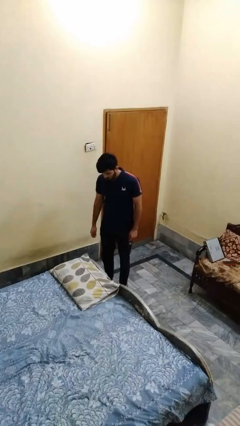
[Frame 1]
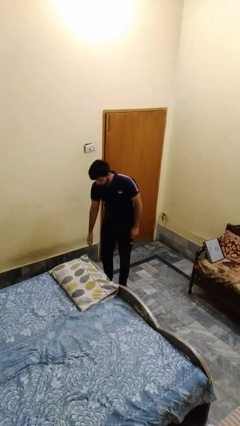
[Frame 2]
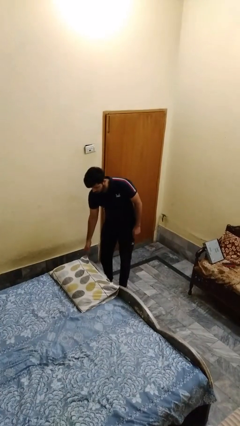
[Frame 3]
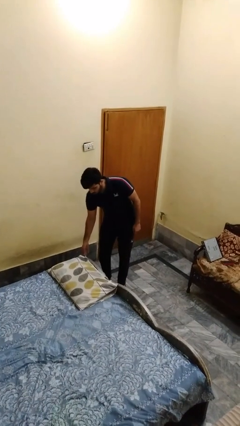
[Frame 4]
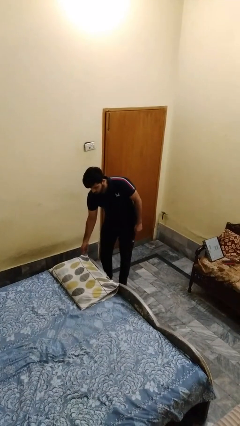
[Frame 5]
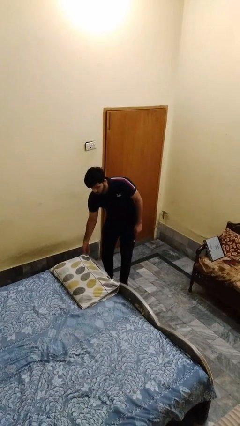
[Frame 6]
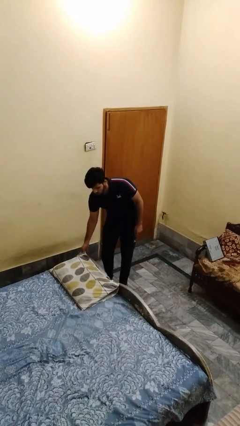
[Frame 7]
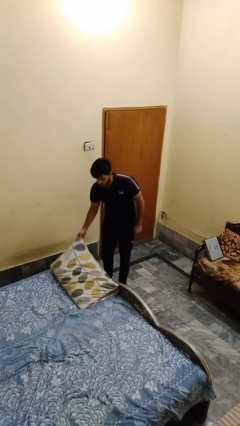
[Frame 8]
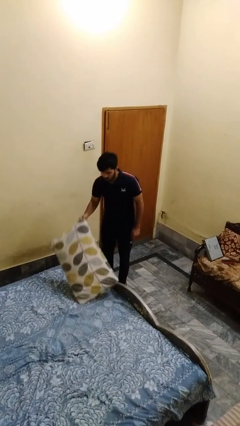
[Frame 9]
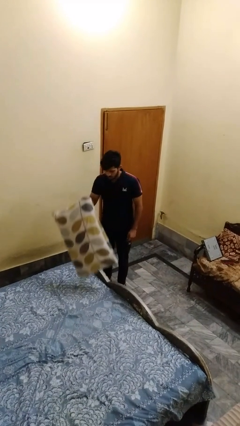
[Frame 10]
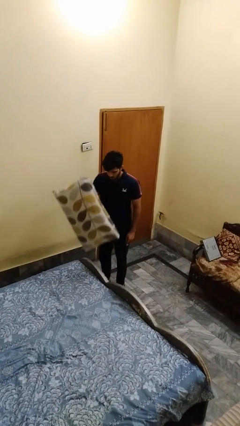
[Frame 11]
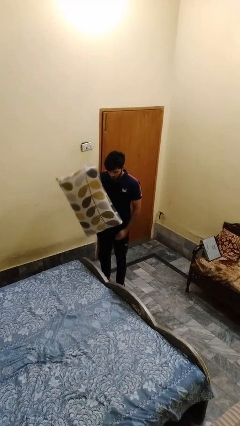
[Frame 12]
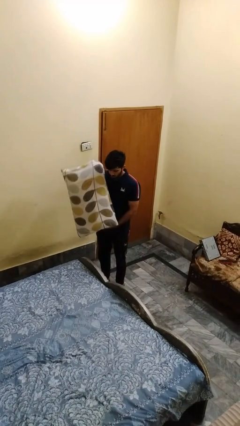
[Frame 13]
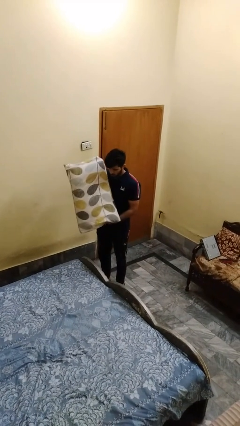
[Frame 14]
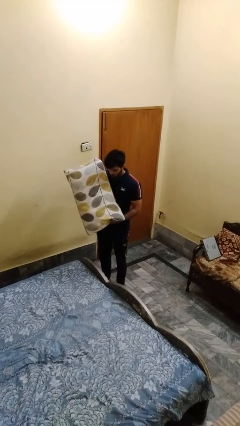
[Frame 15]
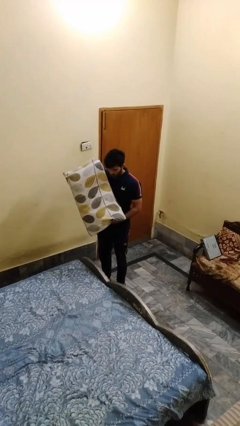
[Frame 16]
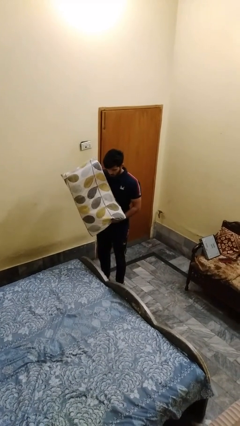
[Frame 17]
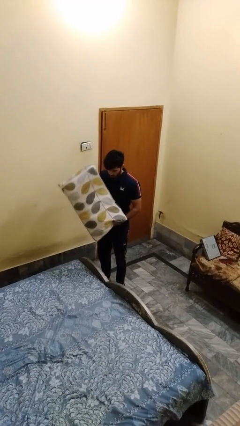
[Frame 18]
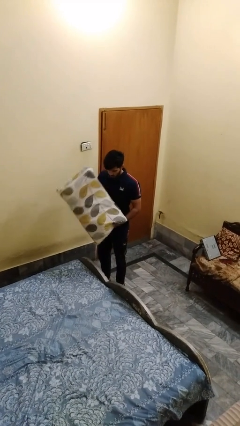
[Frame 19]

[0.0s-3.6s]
person picks up object from bed

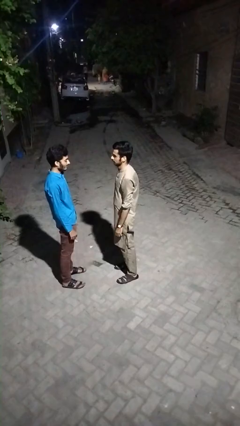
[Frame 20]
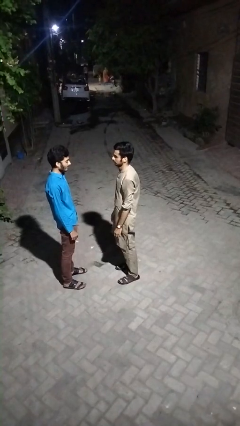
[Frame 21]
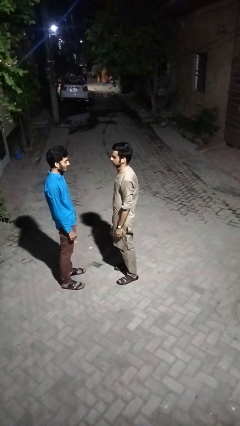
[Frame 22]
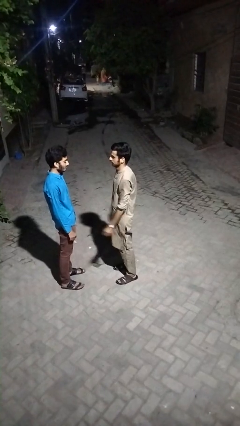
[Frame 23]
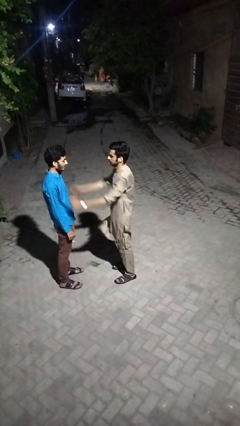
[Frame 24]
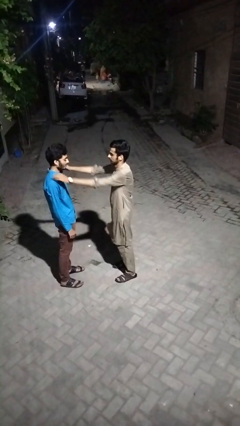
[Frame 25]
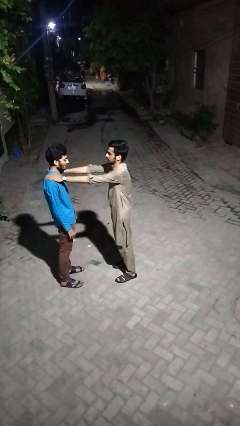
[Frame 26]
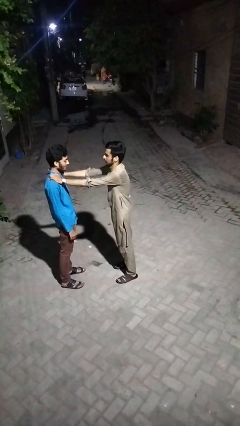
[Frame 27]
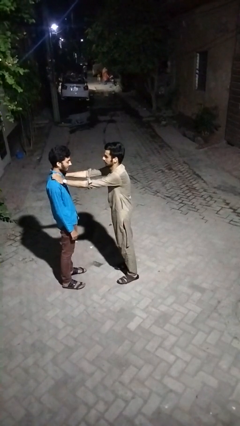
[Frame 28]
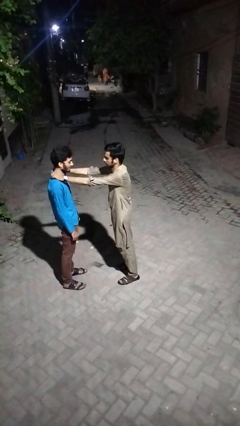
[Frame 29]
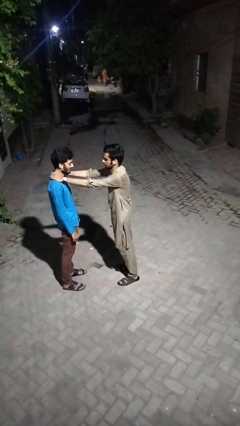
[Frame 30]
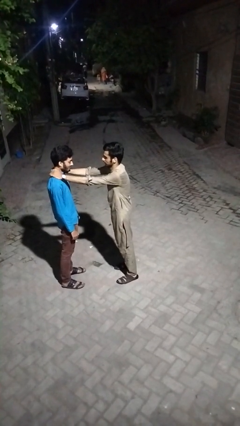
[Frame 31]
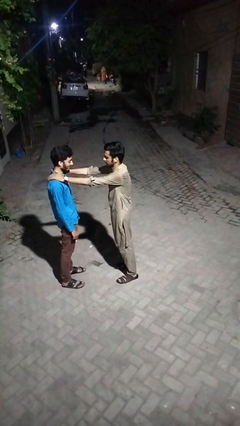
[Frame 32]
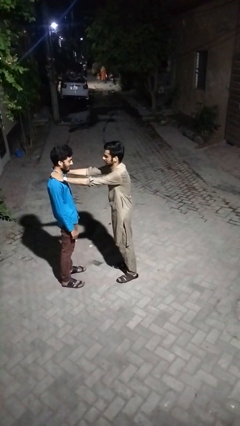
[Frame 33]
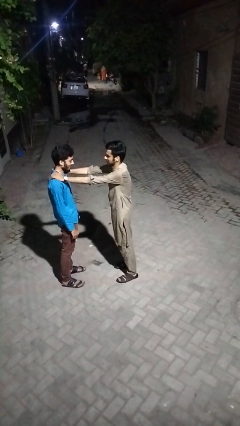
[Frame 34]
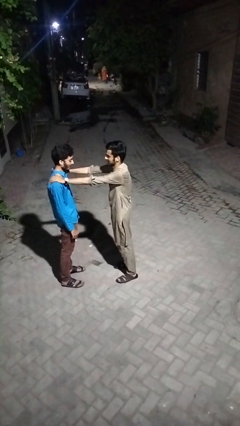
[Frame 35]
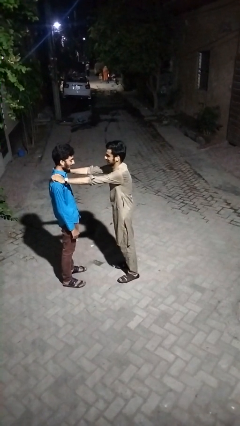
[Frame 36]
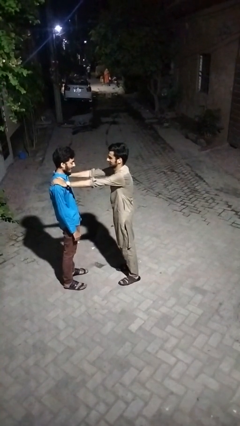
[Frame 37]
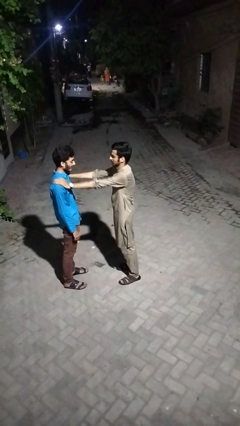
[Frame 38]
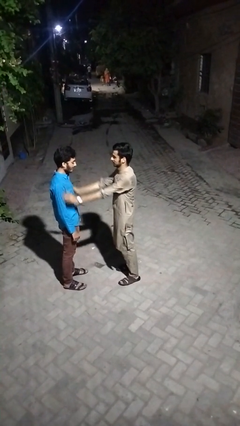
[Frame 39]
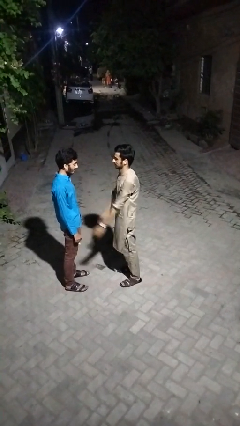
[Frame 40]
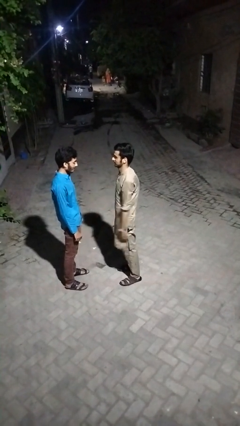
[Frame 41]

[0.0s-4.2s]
person pounds shoulders of person

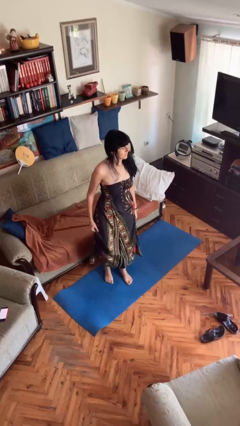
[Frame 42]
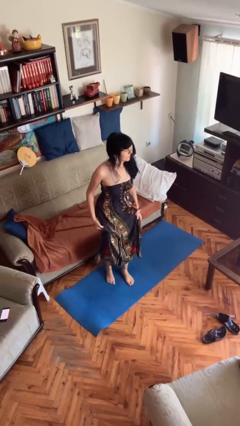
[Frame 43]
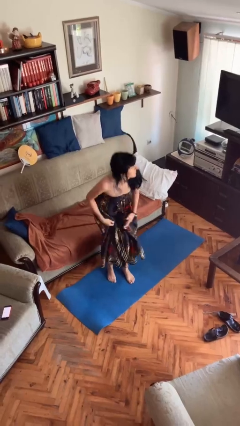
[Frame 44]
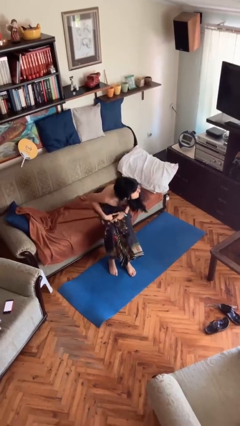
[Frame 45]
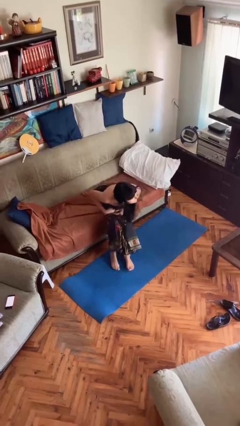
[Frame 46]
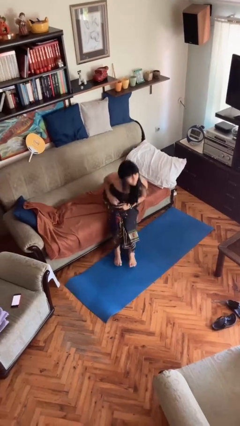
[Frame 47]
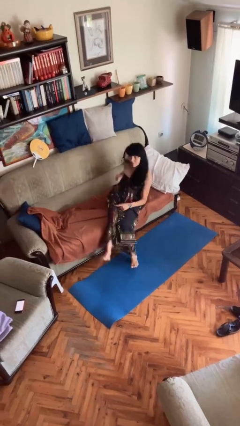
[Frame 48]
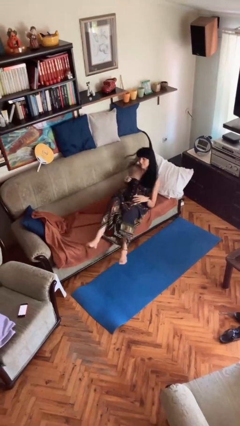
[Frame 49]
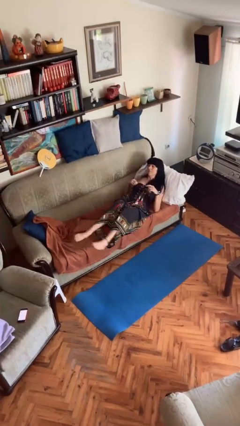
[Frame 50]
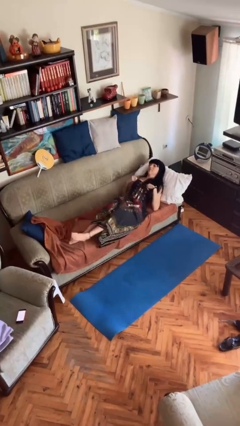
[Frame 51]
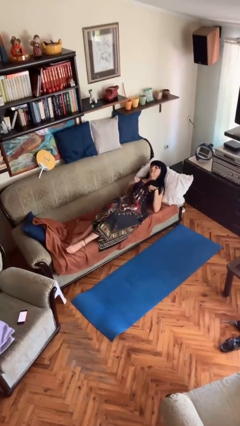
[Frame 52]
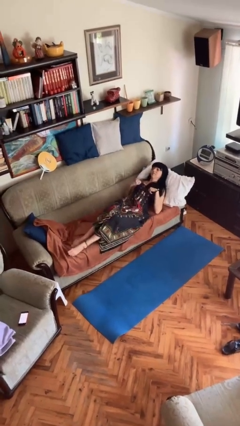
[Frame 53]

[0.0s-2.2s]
person lies down on bed

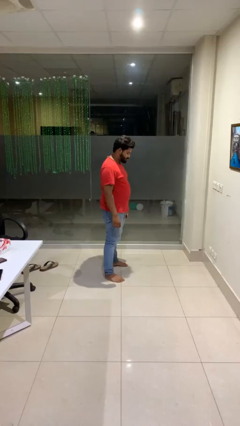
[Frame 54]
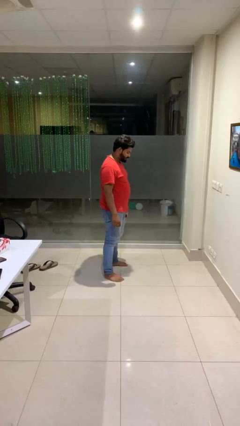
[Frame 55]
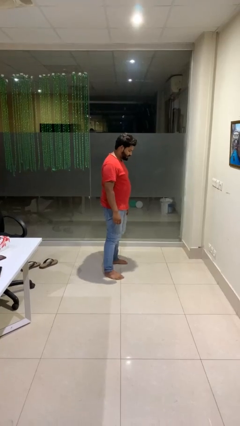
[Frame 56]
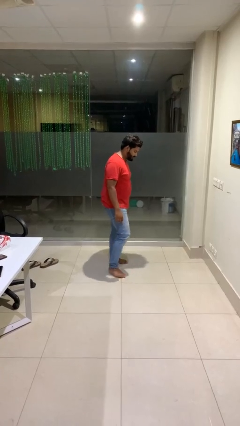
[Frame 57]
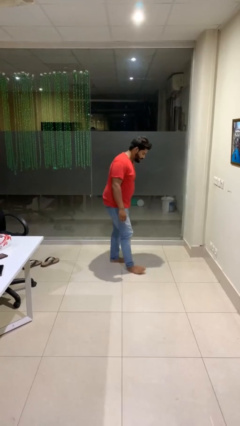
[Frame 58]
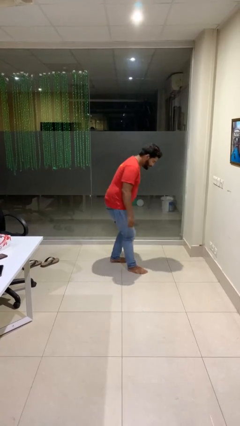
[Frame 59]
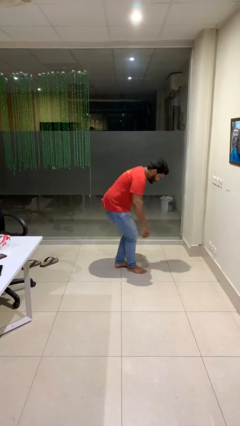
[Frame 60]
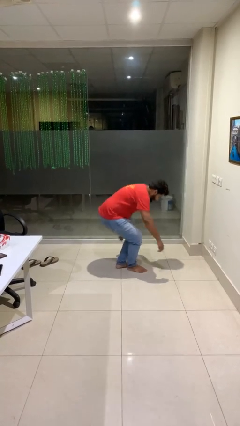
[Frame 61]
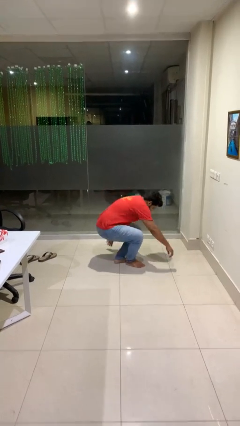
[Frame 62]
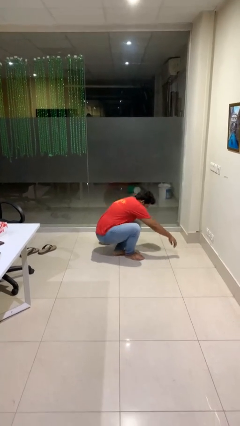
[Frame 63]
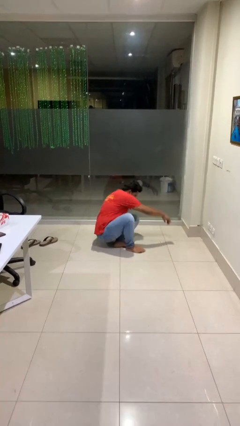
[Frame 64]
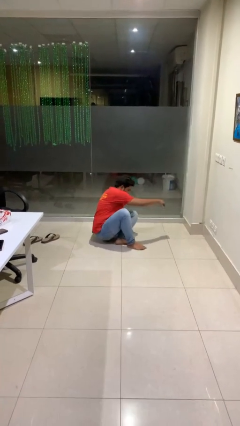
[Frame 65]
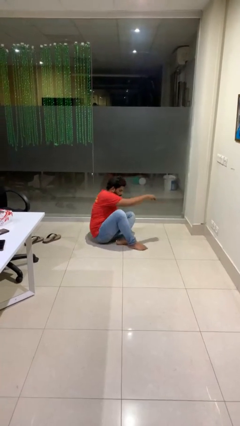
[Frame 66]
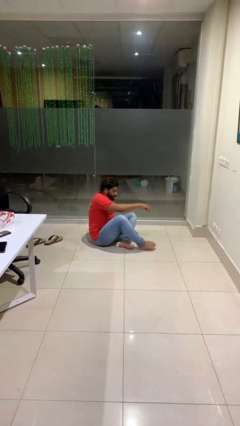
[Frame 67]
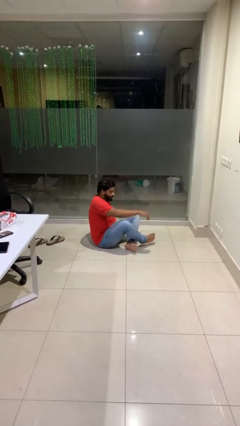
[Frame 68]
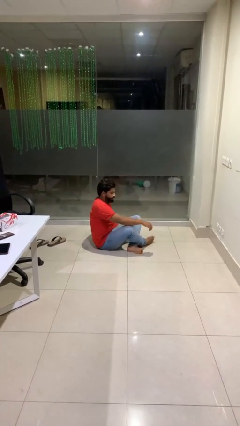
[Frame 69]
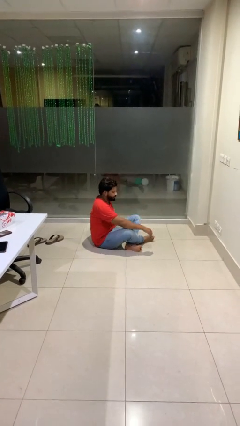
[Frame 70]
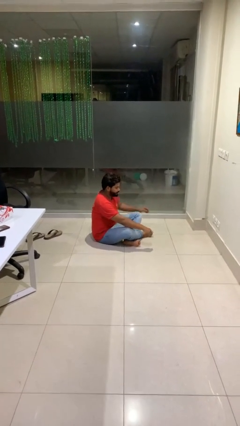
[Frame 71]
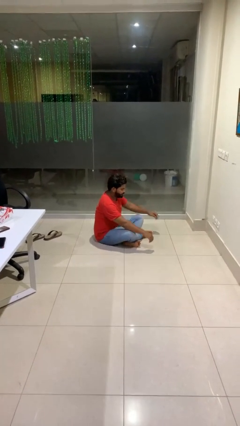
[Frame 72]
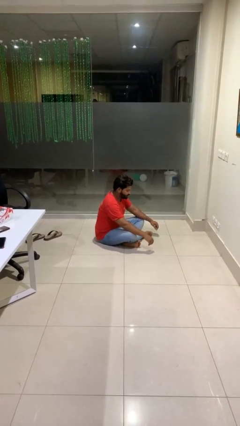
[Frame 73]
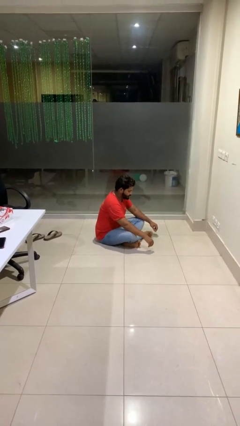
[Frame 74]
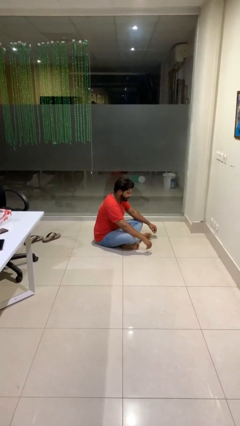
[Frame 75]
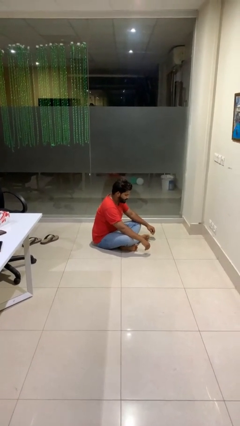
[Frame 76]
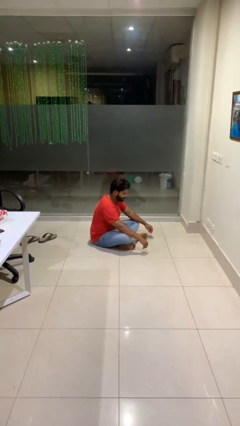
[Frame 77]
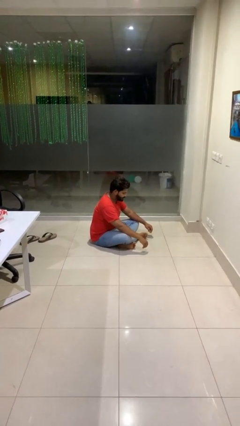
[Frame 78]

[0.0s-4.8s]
person sits crisscross

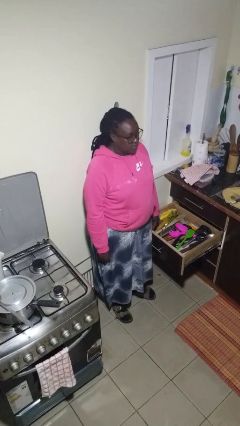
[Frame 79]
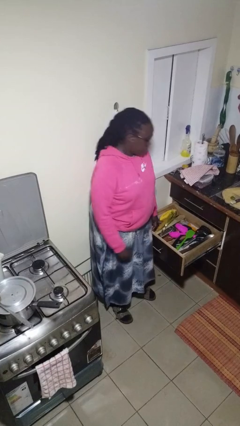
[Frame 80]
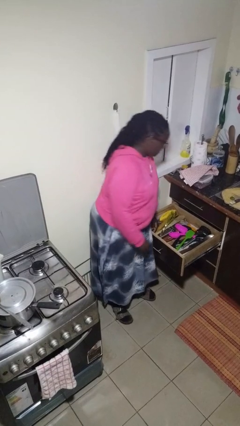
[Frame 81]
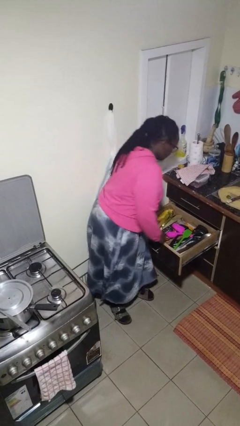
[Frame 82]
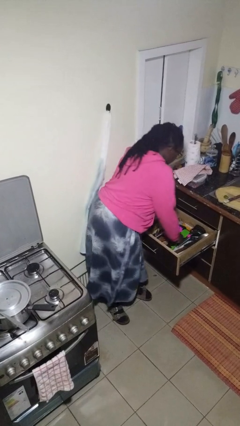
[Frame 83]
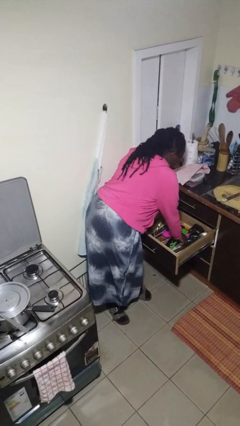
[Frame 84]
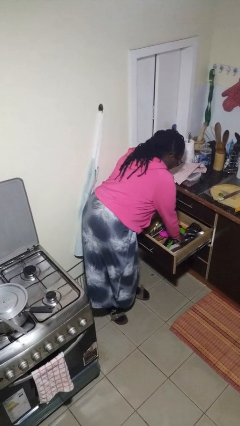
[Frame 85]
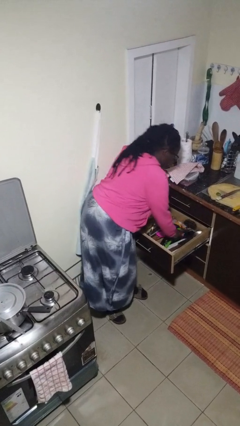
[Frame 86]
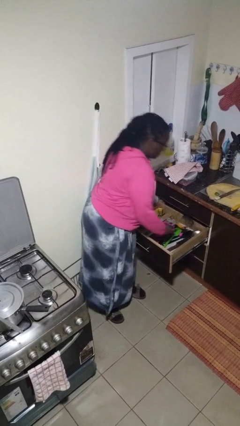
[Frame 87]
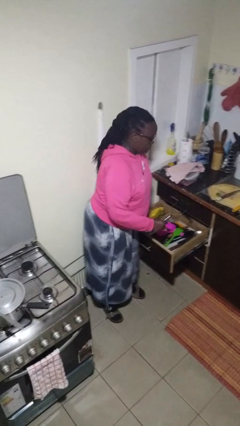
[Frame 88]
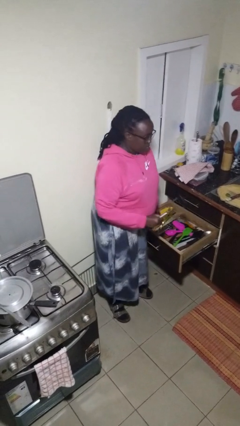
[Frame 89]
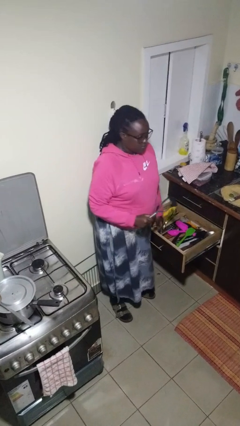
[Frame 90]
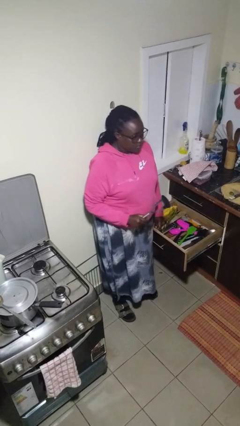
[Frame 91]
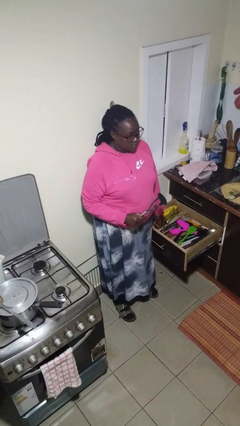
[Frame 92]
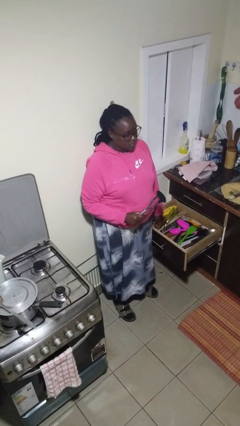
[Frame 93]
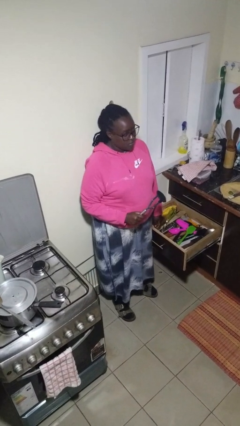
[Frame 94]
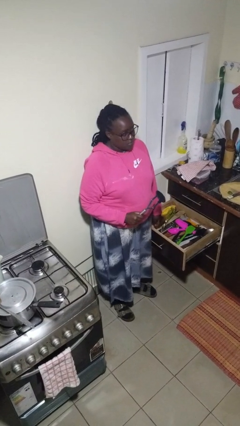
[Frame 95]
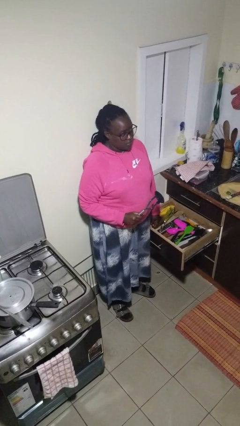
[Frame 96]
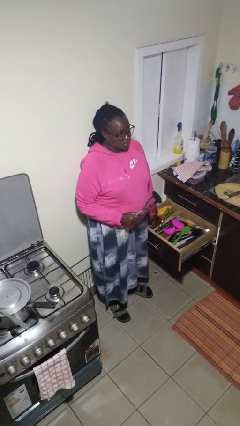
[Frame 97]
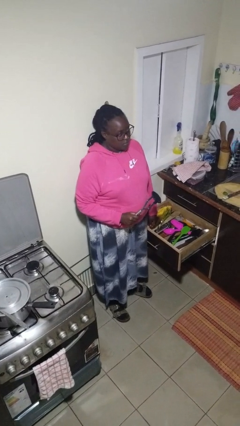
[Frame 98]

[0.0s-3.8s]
person takes object from kitchen drawer
